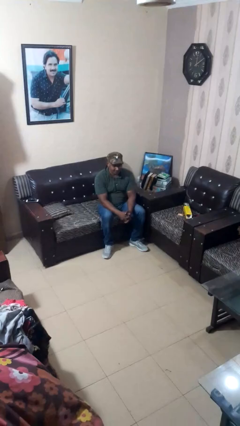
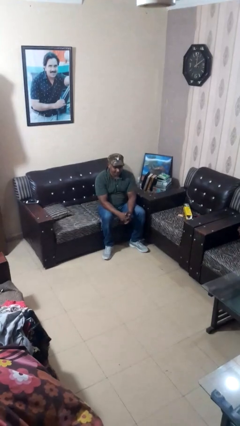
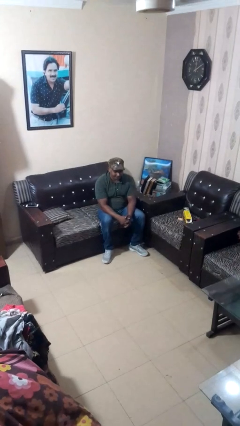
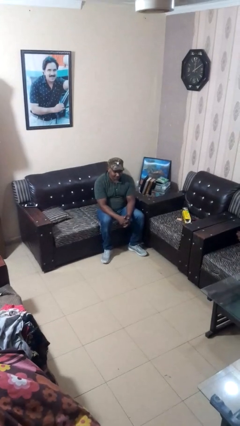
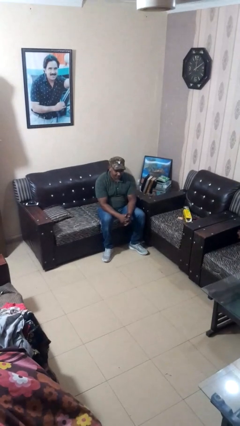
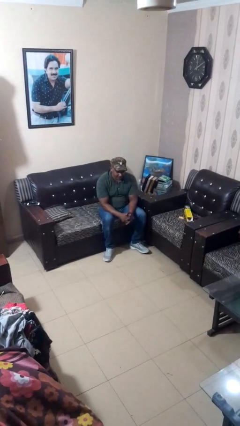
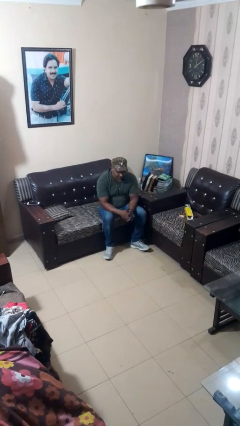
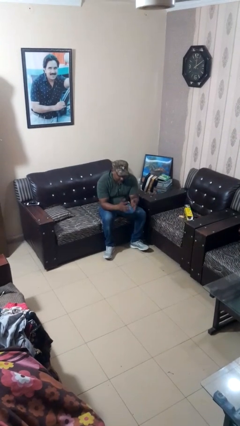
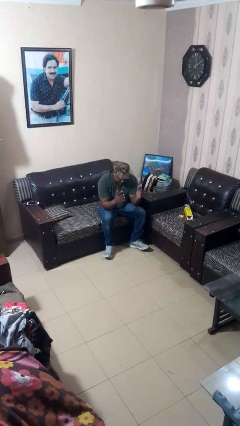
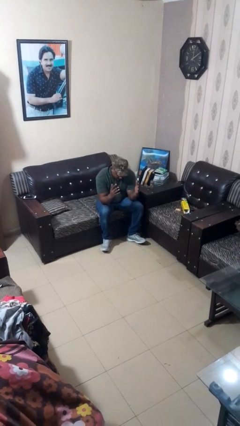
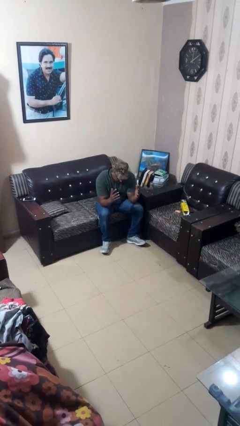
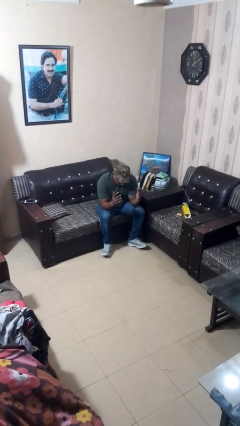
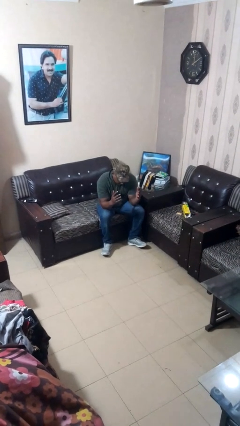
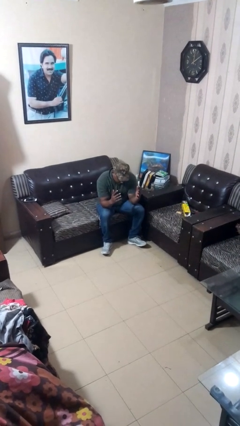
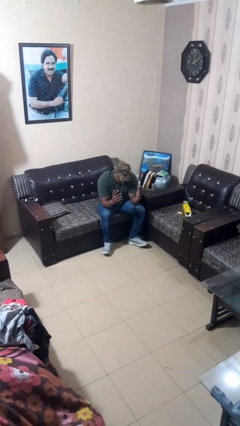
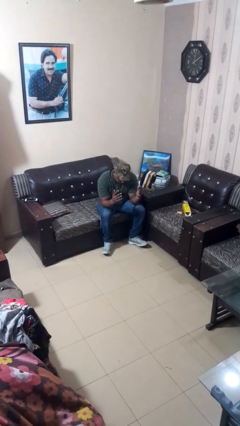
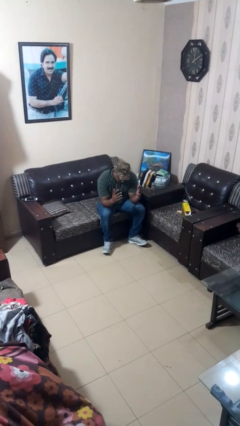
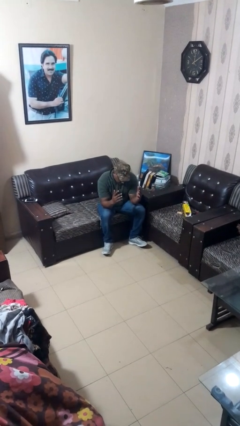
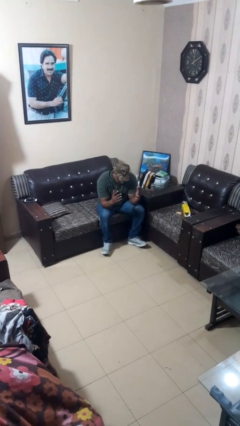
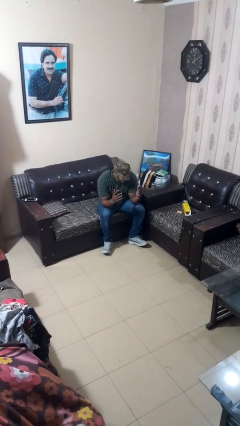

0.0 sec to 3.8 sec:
person prays

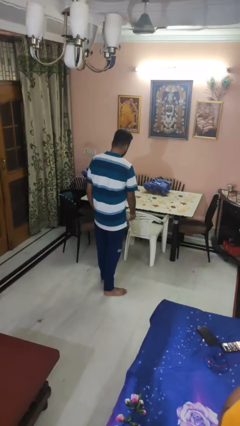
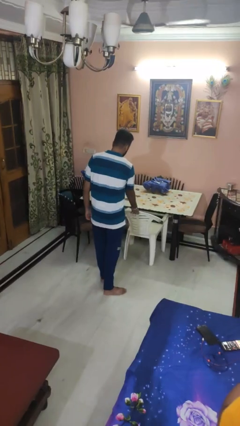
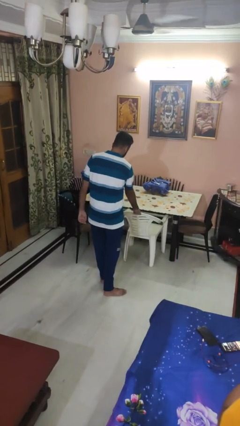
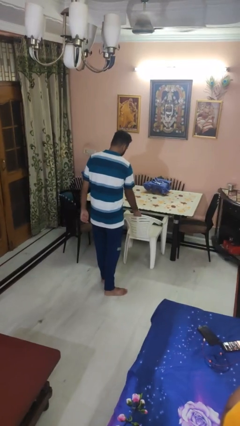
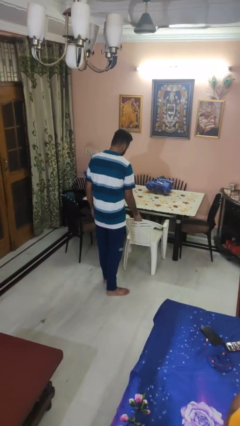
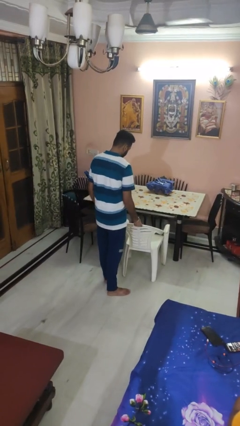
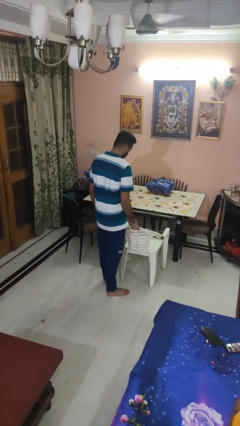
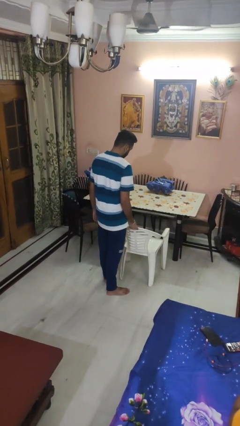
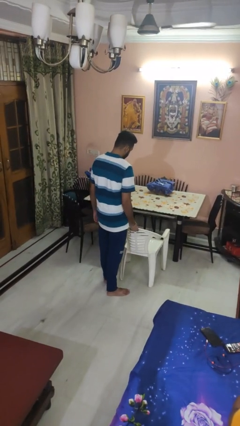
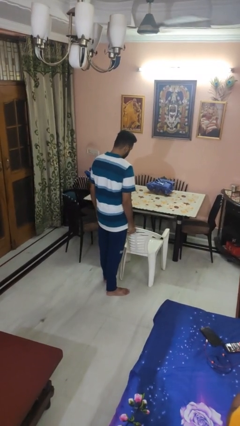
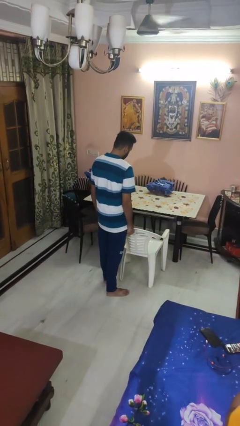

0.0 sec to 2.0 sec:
person pulls out chair

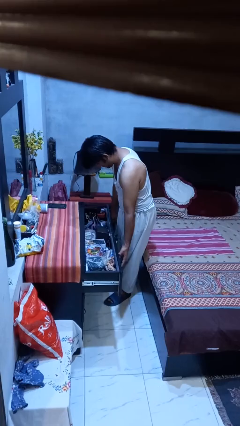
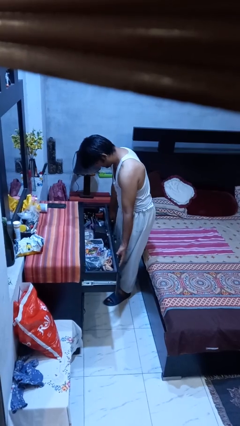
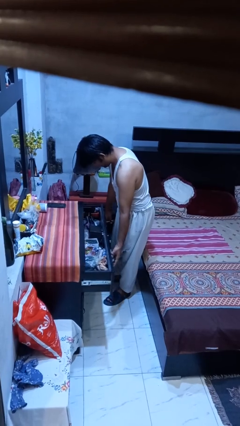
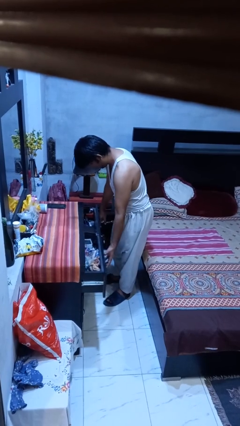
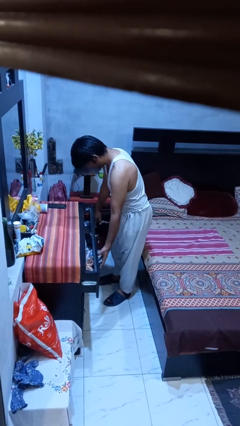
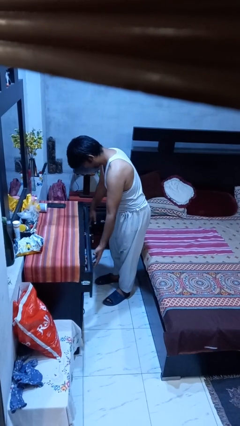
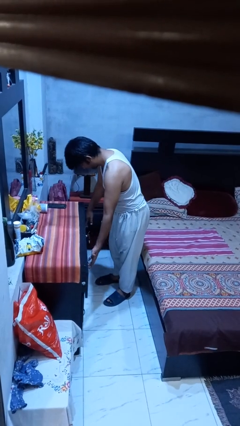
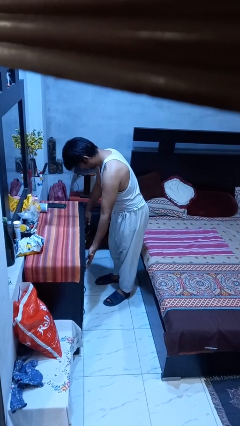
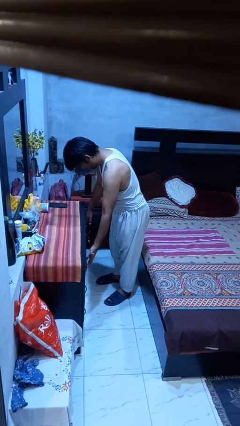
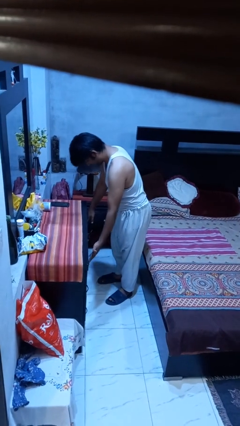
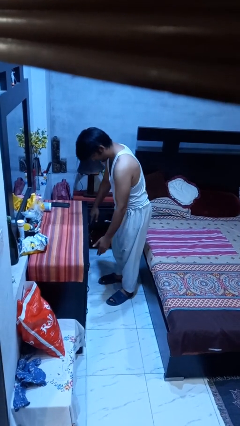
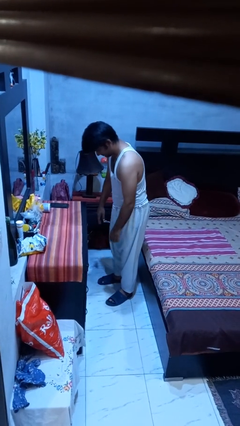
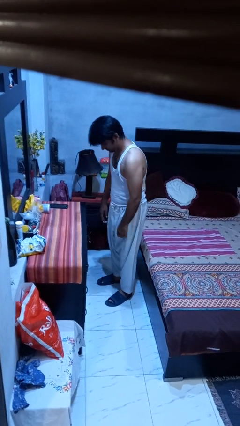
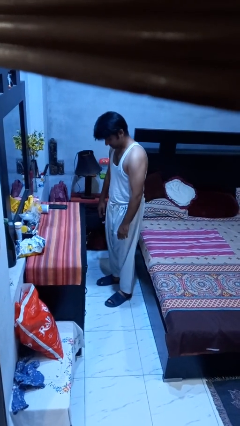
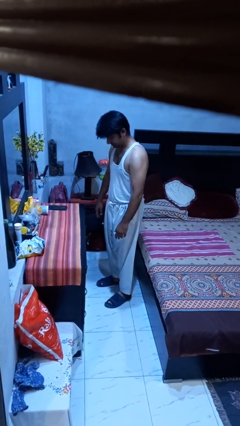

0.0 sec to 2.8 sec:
person closes dresser drawer

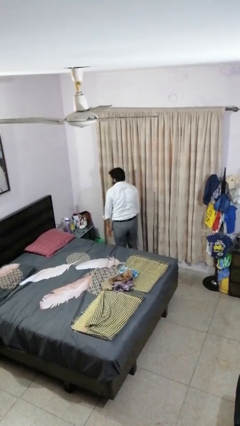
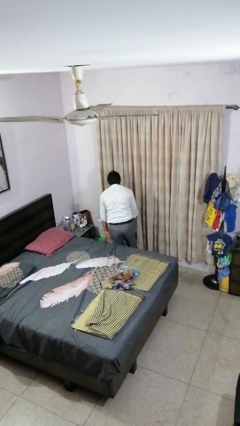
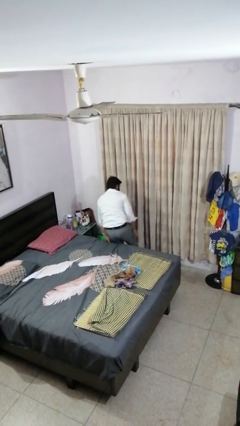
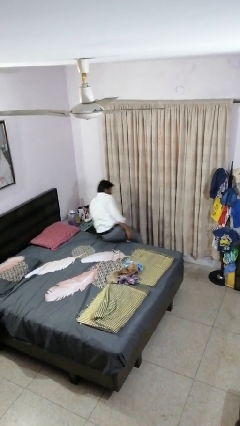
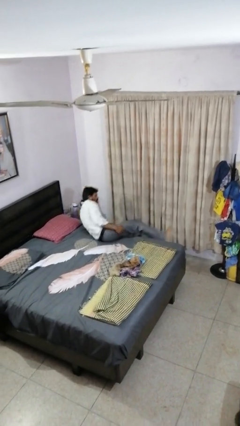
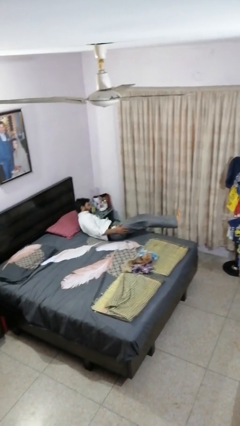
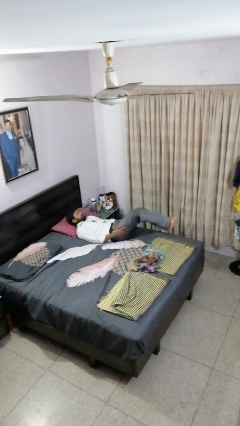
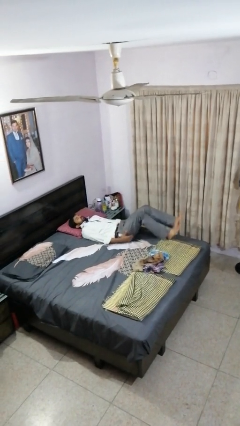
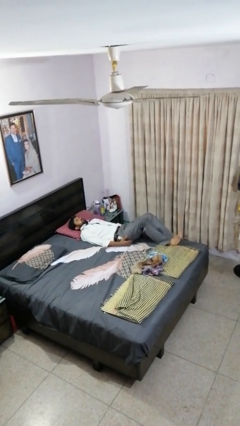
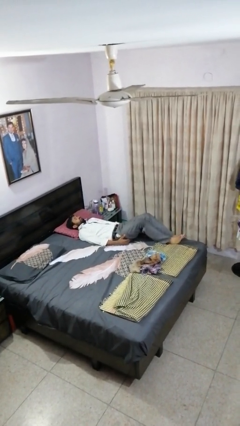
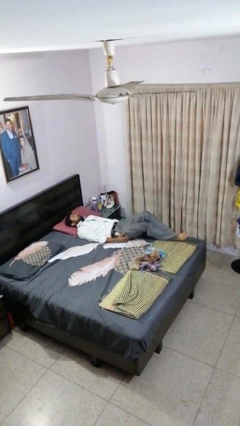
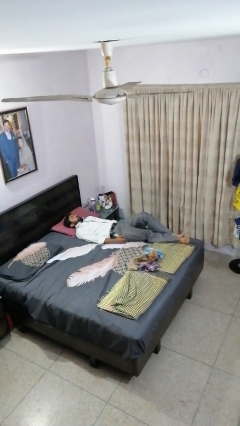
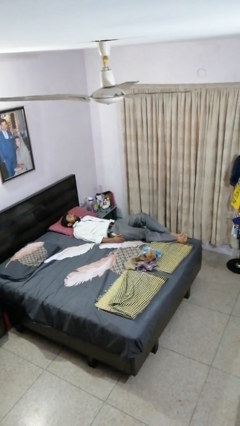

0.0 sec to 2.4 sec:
person lies down on bed

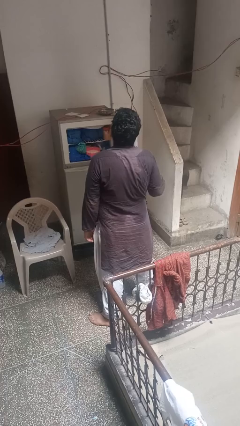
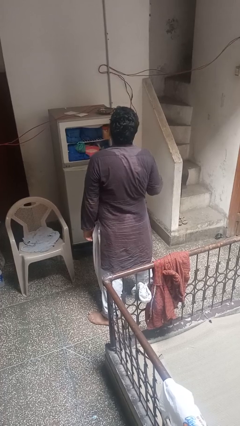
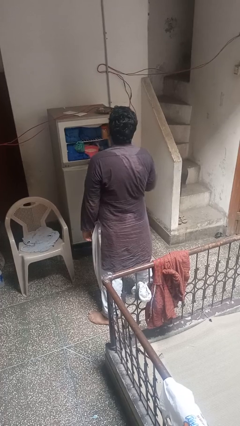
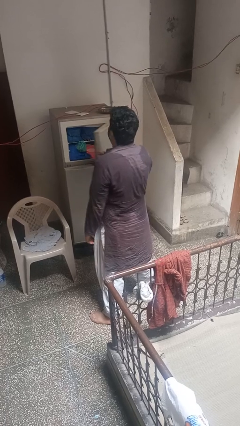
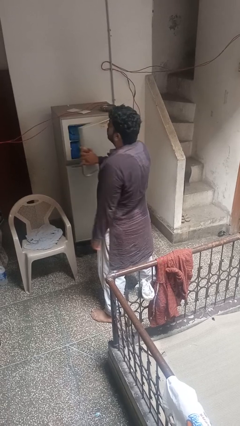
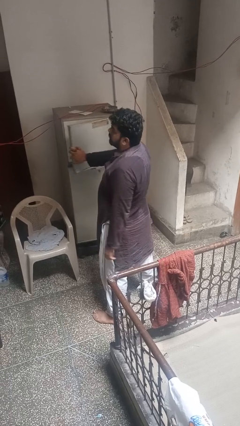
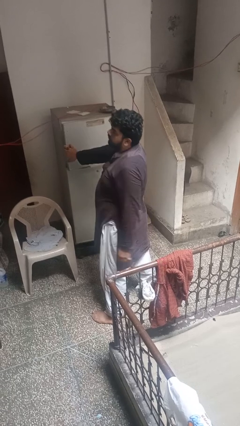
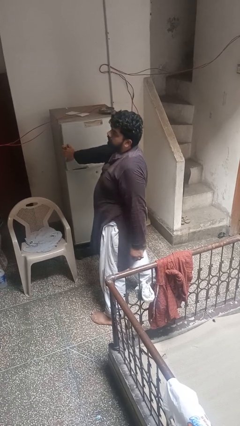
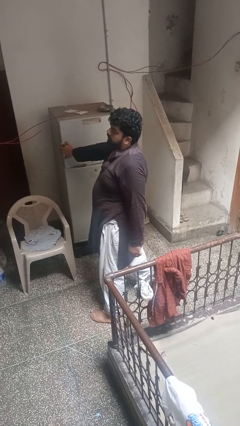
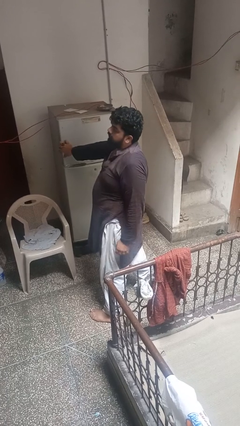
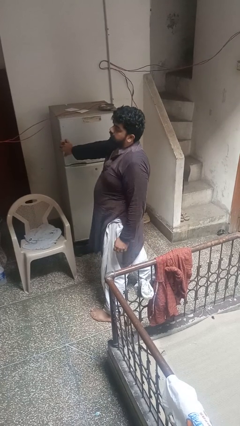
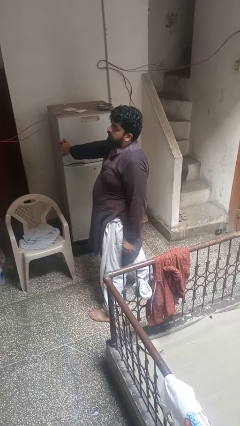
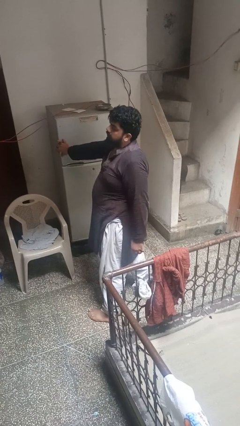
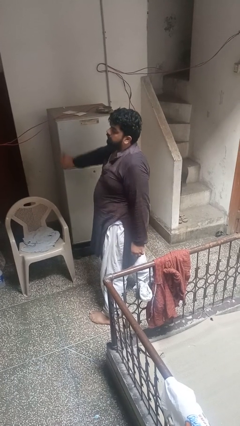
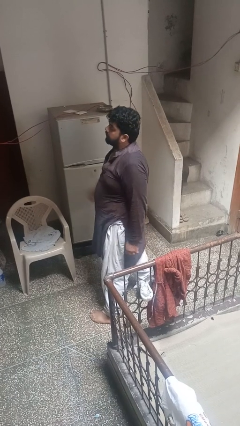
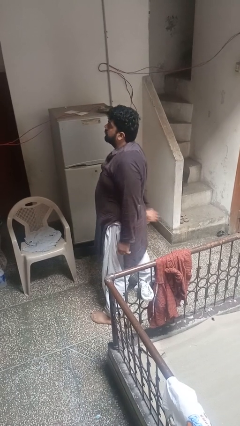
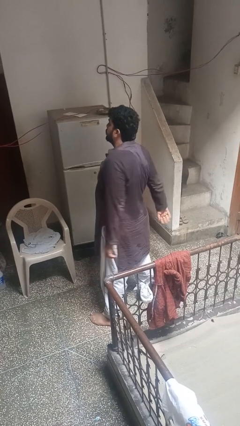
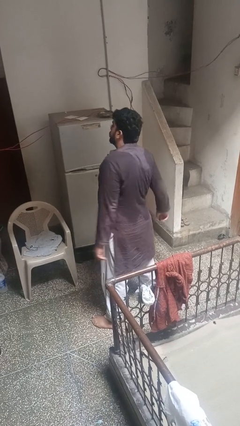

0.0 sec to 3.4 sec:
person closes refrigerator
